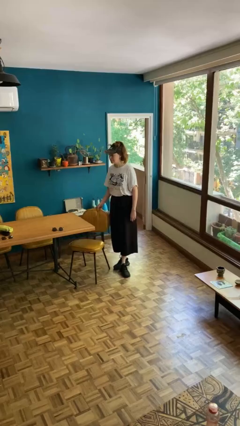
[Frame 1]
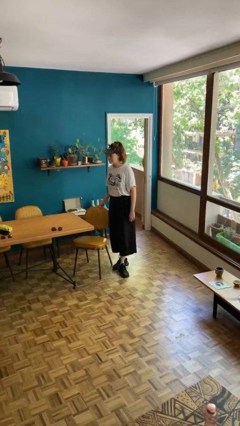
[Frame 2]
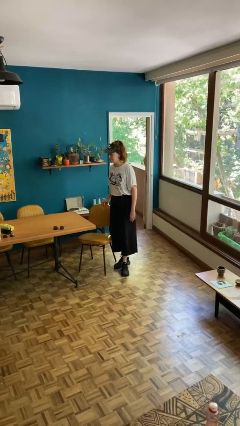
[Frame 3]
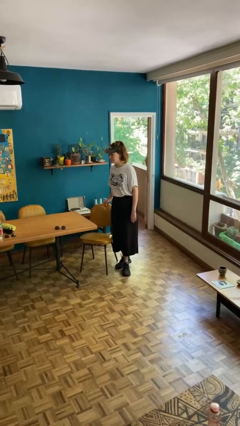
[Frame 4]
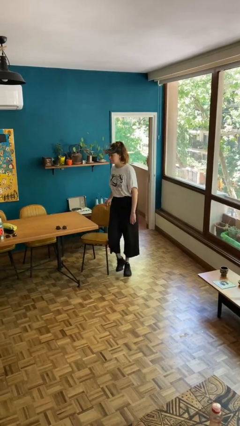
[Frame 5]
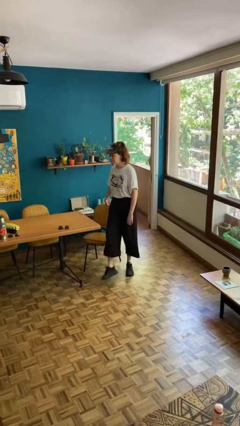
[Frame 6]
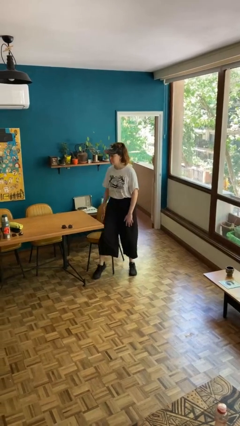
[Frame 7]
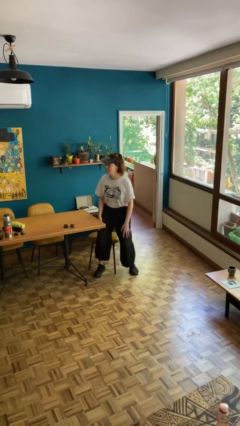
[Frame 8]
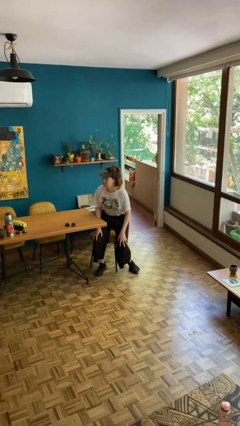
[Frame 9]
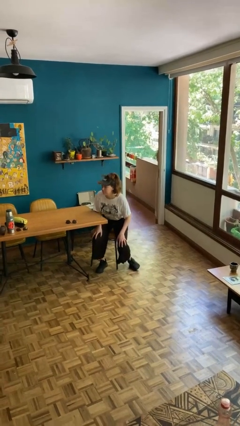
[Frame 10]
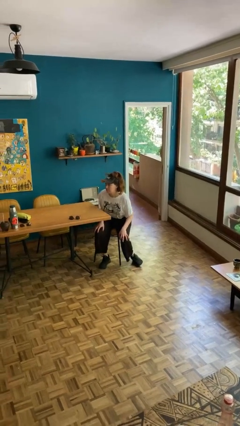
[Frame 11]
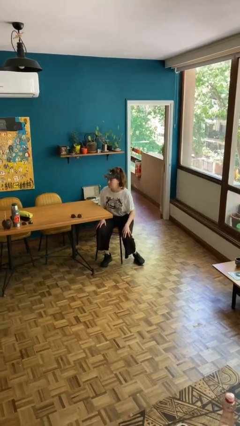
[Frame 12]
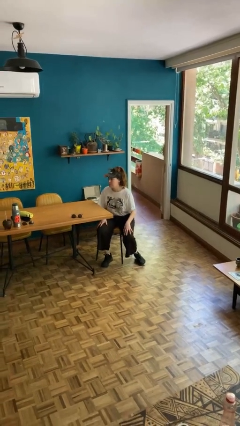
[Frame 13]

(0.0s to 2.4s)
person sits down

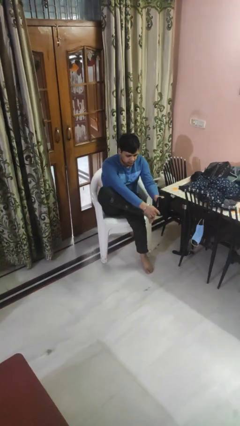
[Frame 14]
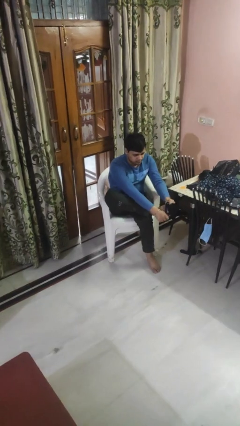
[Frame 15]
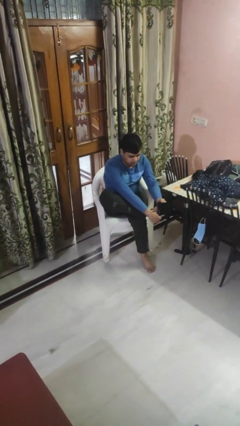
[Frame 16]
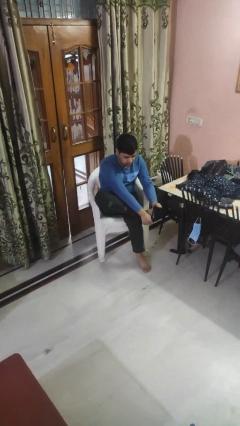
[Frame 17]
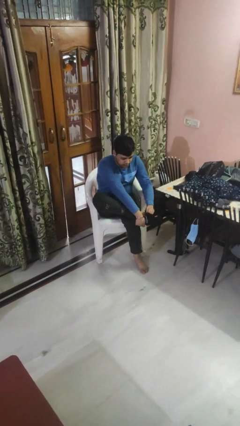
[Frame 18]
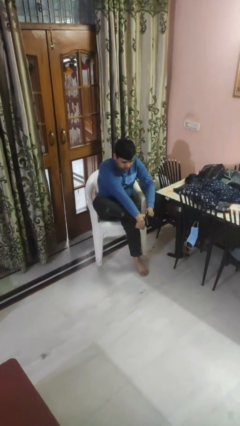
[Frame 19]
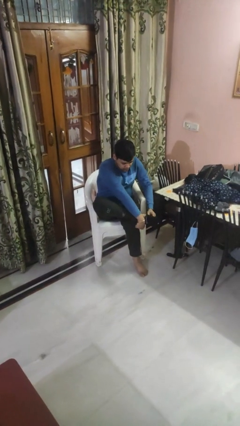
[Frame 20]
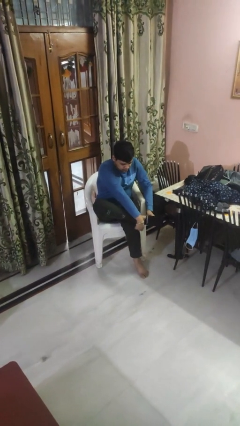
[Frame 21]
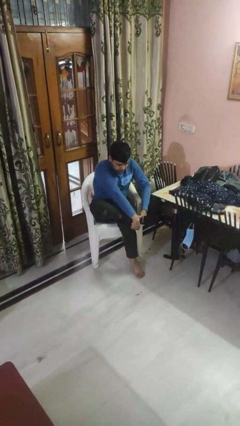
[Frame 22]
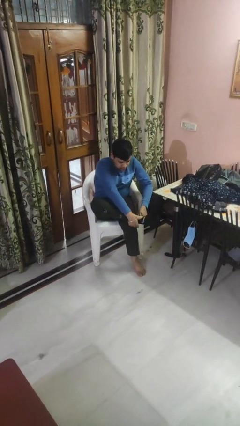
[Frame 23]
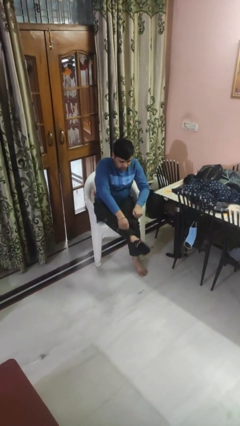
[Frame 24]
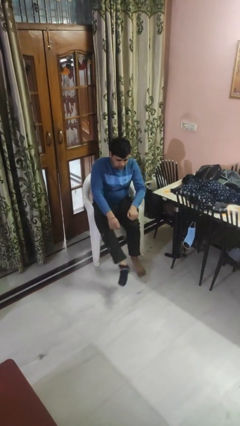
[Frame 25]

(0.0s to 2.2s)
person puts on socks

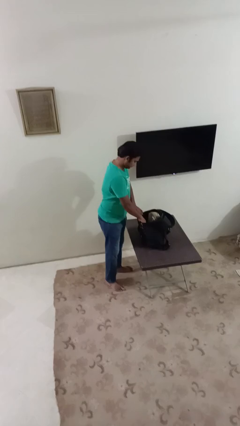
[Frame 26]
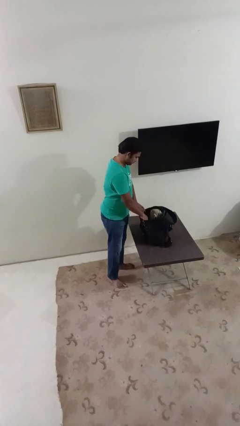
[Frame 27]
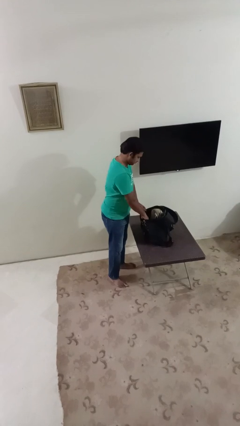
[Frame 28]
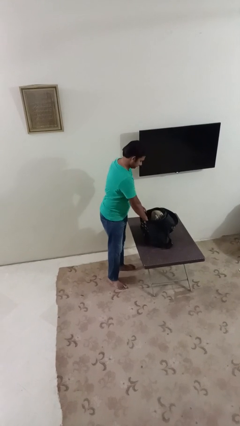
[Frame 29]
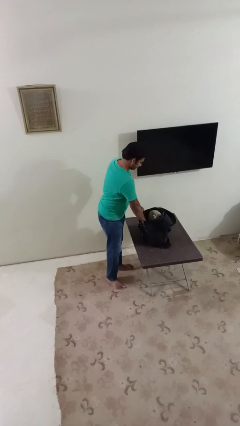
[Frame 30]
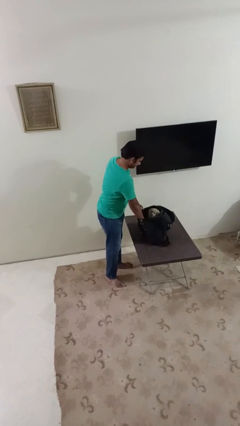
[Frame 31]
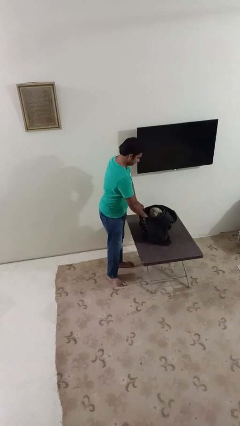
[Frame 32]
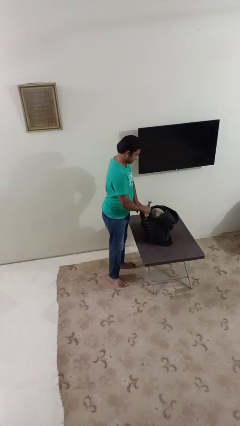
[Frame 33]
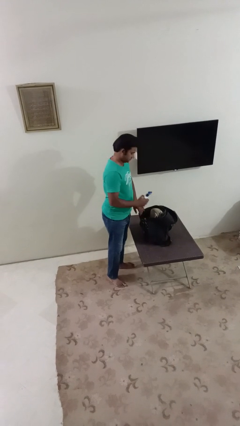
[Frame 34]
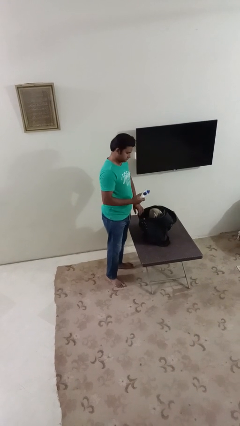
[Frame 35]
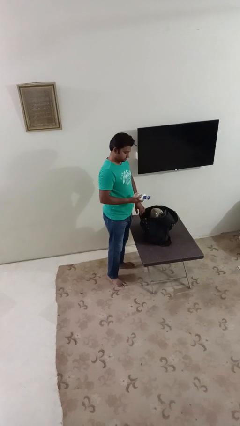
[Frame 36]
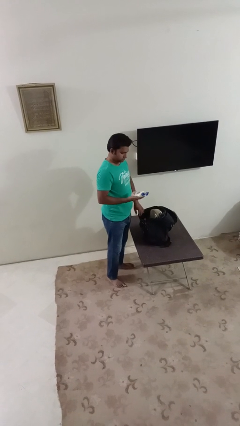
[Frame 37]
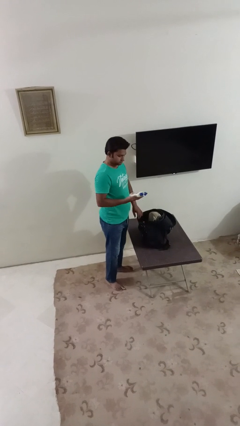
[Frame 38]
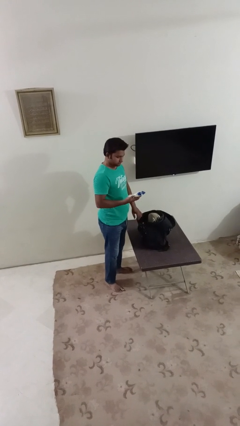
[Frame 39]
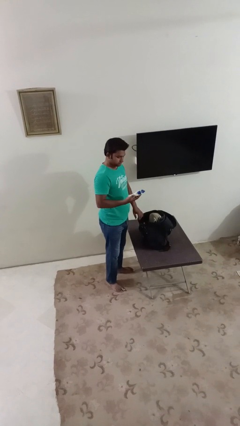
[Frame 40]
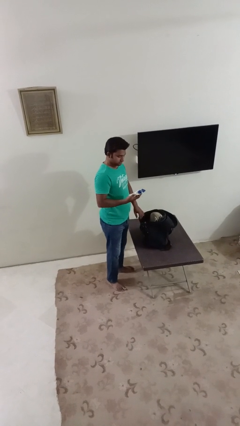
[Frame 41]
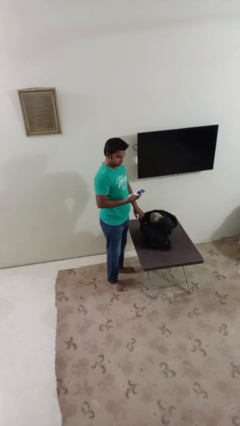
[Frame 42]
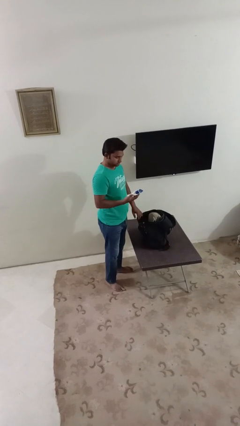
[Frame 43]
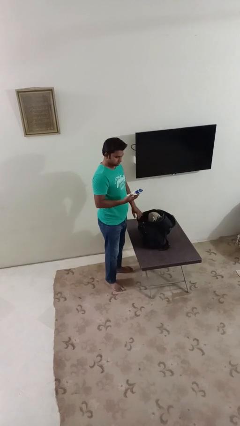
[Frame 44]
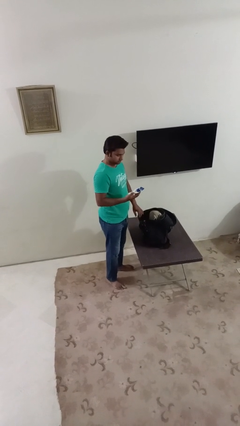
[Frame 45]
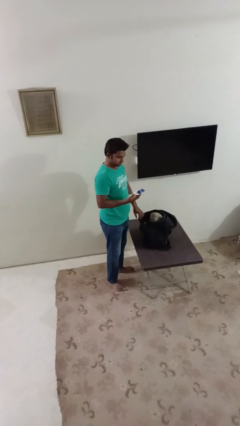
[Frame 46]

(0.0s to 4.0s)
person takes object from backpack

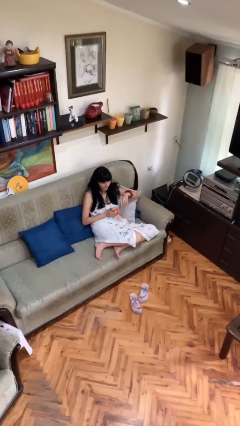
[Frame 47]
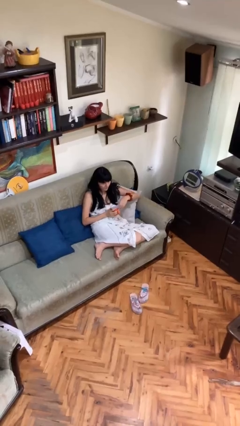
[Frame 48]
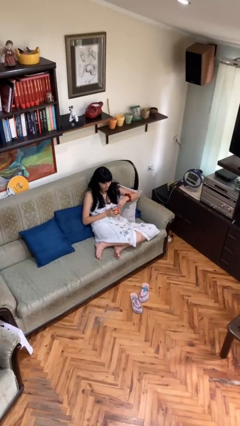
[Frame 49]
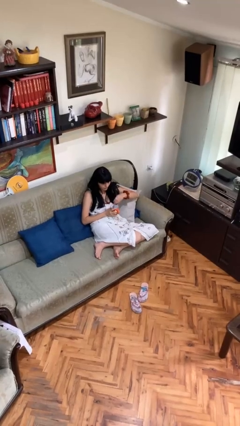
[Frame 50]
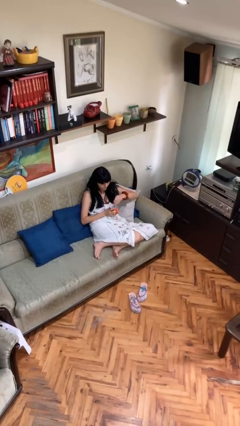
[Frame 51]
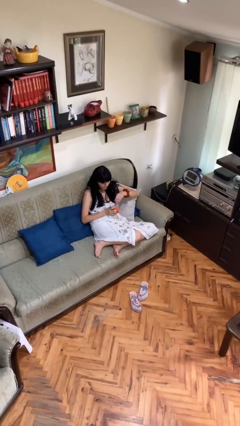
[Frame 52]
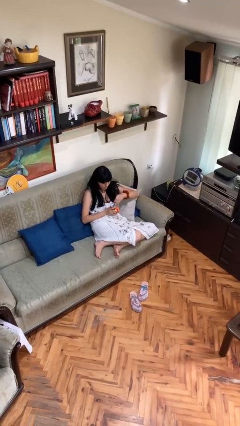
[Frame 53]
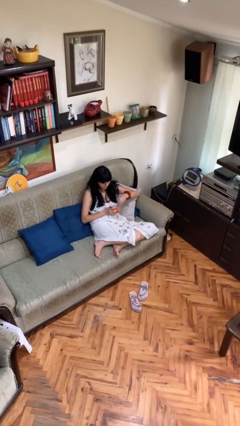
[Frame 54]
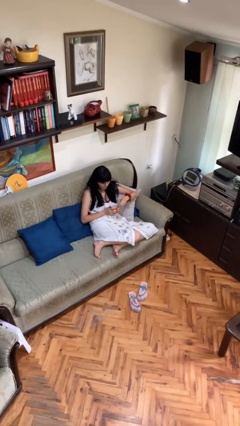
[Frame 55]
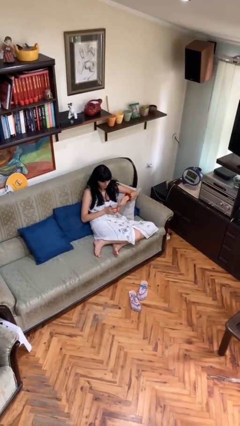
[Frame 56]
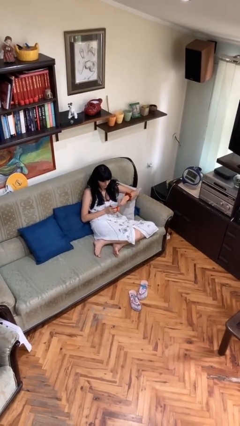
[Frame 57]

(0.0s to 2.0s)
person stirs mug

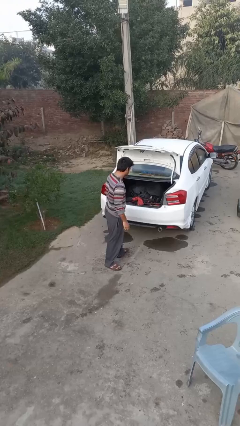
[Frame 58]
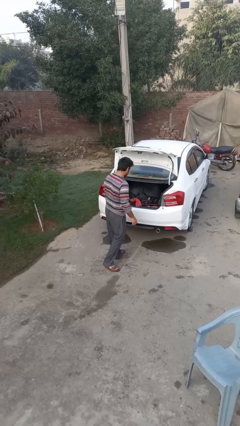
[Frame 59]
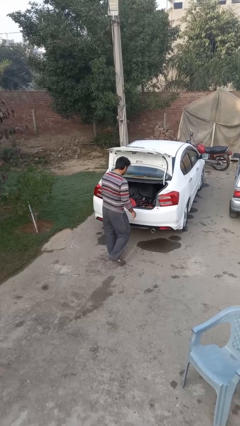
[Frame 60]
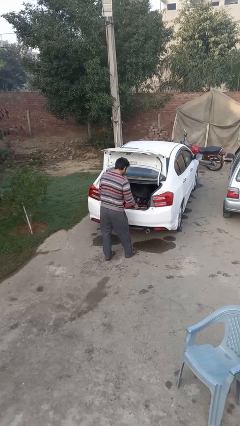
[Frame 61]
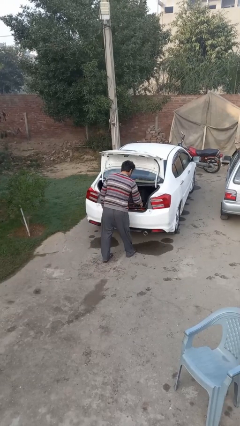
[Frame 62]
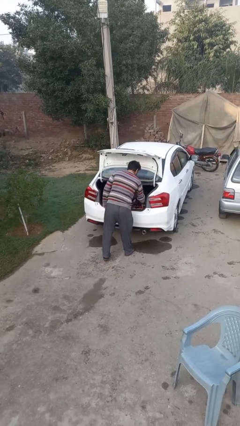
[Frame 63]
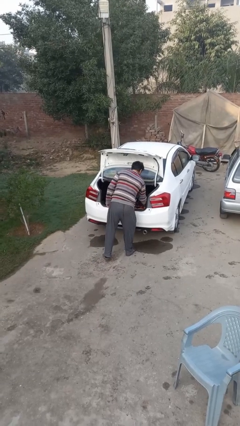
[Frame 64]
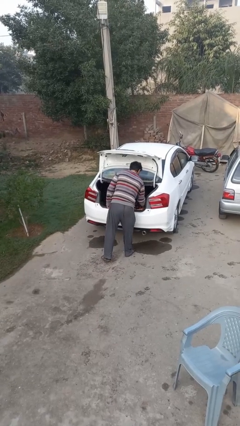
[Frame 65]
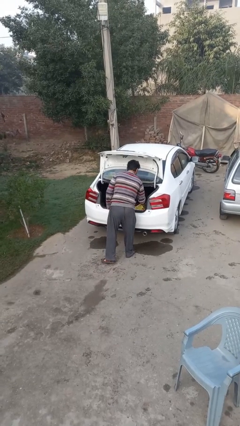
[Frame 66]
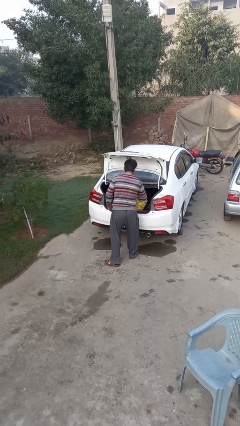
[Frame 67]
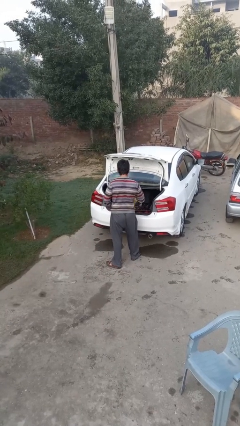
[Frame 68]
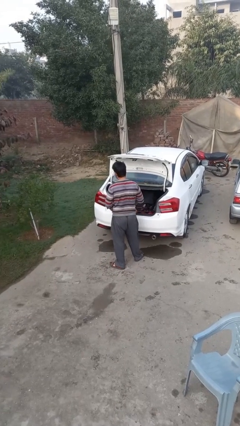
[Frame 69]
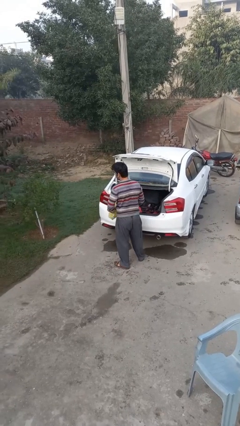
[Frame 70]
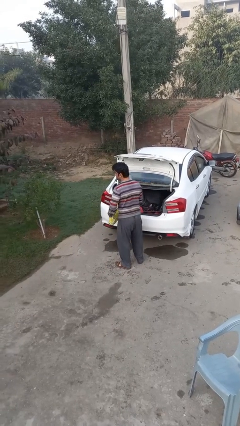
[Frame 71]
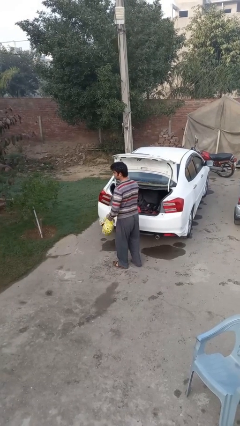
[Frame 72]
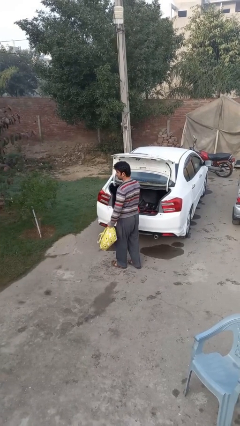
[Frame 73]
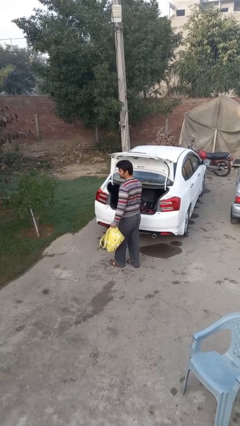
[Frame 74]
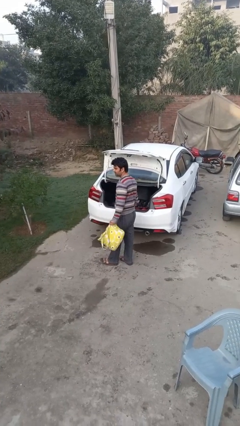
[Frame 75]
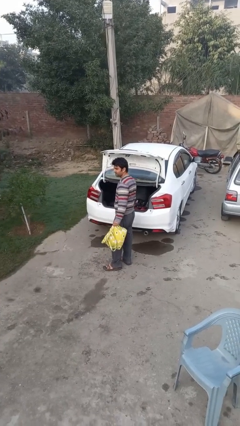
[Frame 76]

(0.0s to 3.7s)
person unloads car

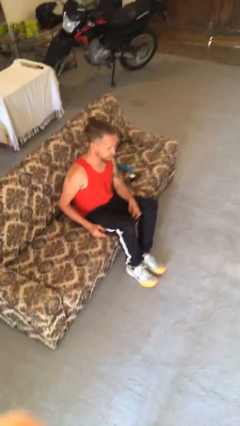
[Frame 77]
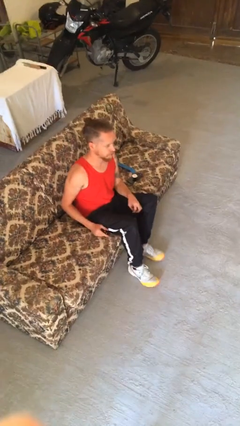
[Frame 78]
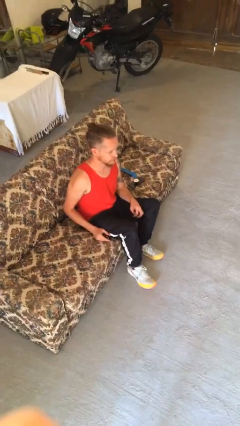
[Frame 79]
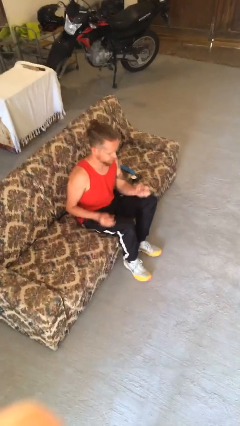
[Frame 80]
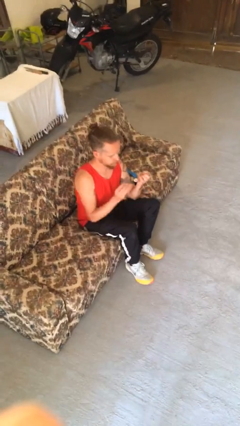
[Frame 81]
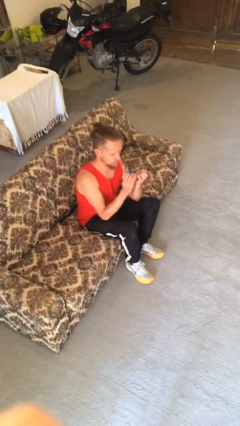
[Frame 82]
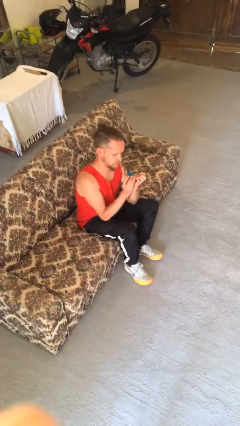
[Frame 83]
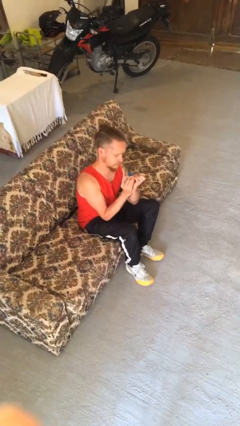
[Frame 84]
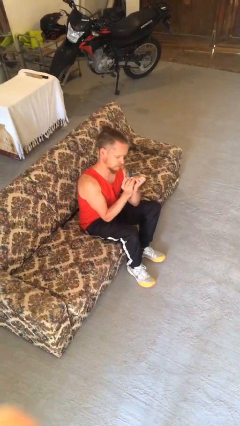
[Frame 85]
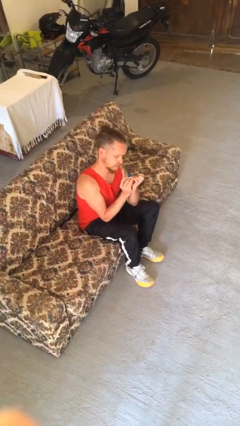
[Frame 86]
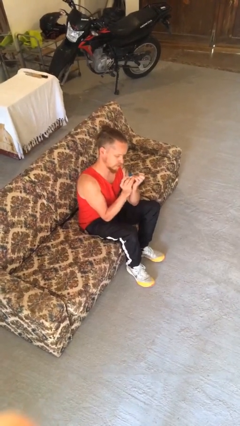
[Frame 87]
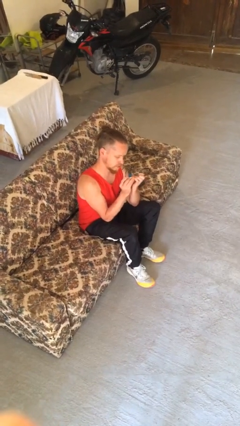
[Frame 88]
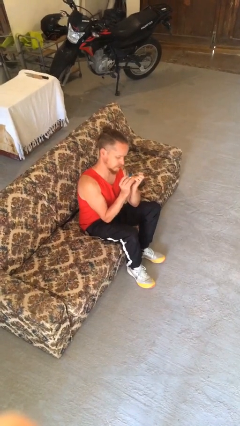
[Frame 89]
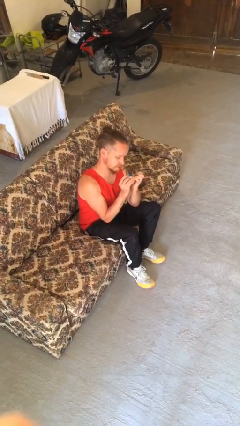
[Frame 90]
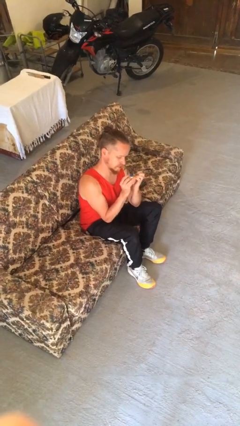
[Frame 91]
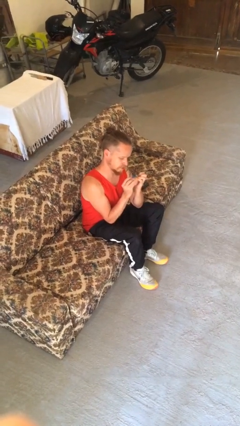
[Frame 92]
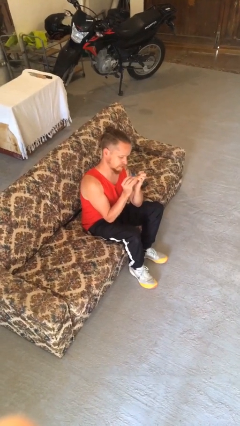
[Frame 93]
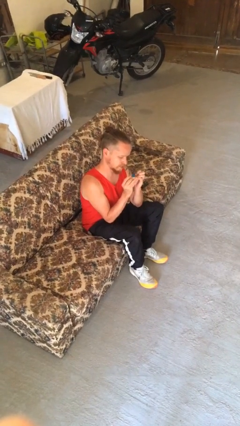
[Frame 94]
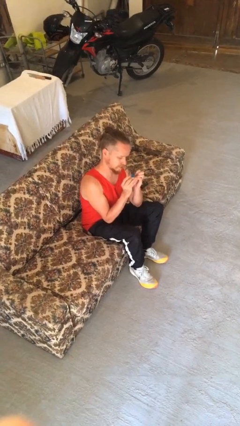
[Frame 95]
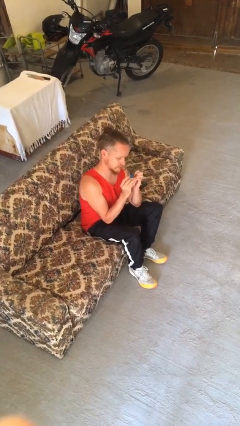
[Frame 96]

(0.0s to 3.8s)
person clips fingernails
